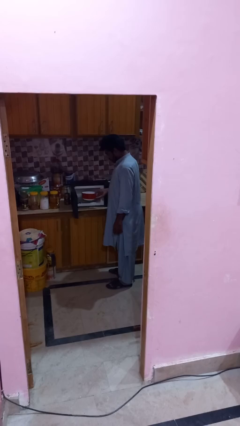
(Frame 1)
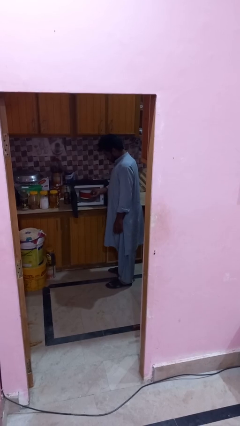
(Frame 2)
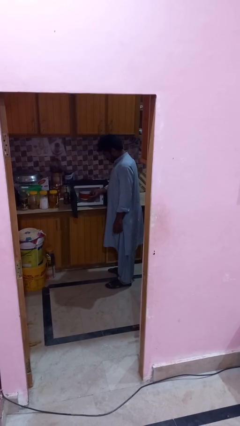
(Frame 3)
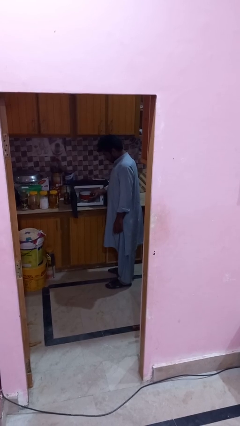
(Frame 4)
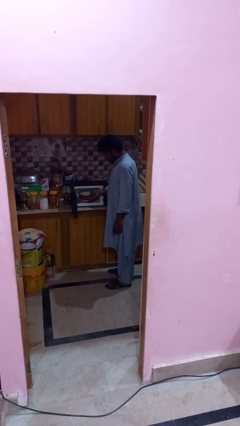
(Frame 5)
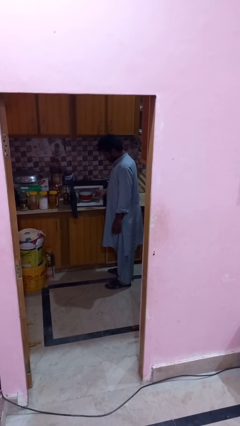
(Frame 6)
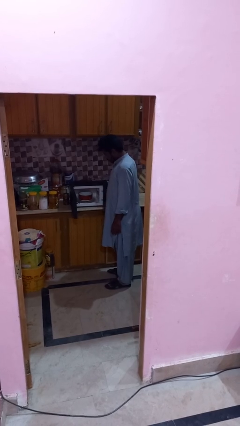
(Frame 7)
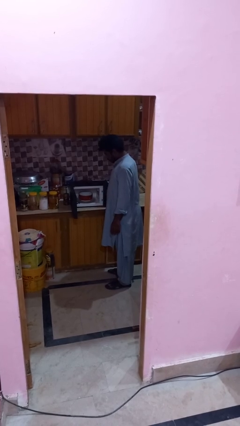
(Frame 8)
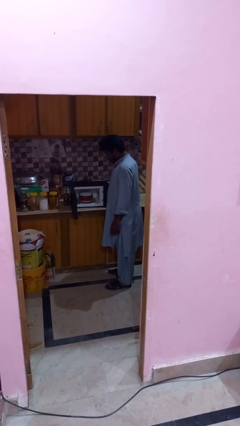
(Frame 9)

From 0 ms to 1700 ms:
person puts object into microwave

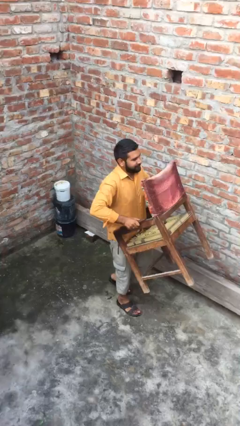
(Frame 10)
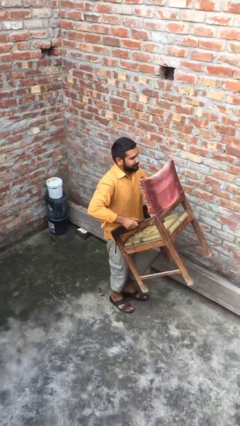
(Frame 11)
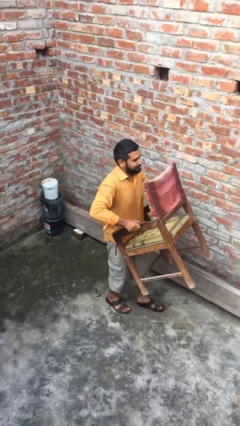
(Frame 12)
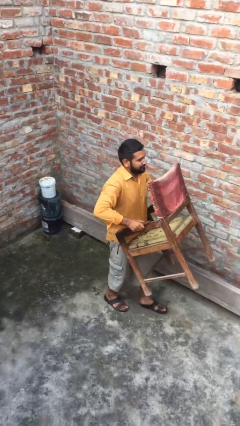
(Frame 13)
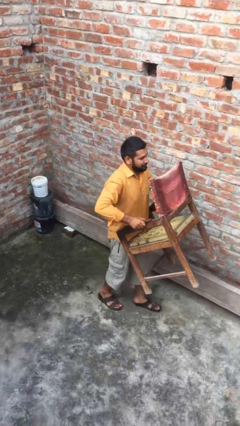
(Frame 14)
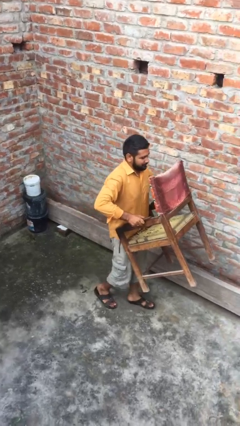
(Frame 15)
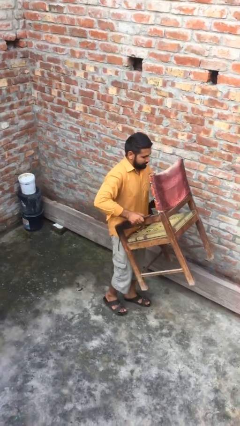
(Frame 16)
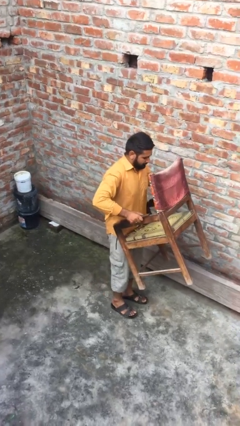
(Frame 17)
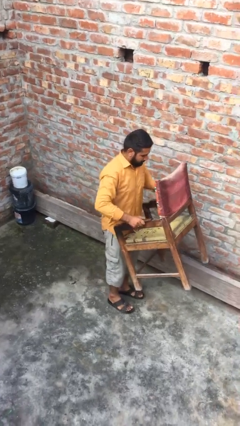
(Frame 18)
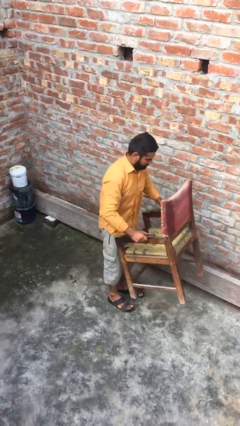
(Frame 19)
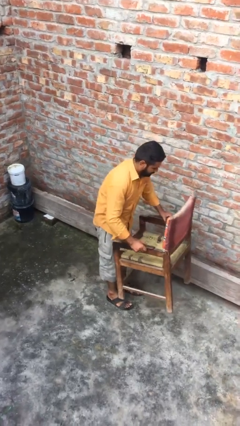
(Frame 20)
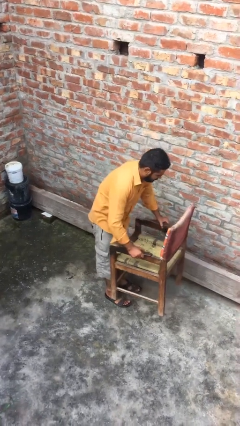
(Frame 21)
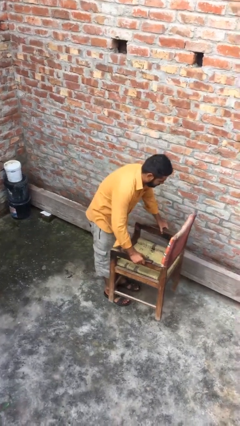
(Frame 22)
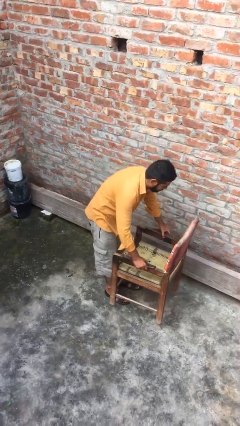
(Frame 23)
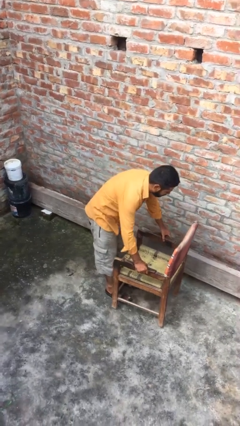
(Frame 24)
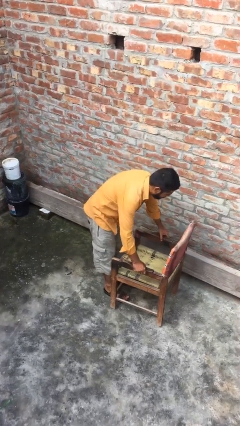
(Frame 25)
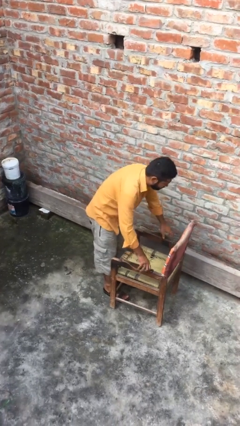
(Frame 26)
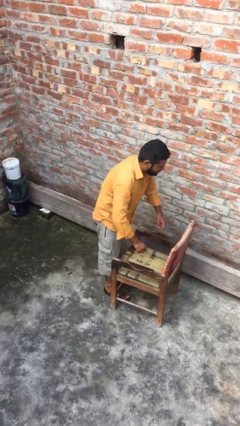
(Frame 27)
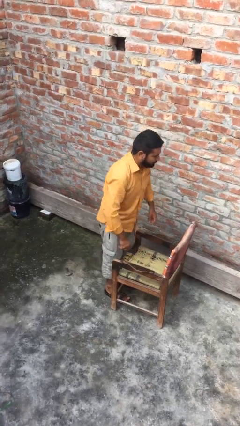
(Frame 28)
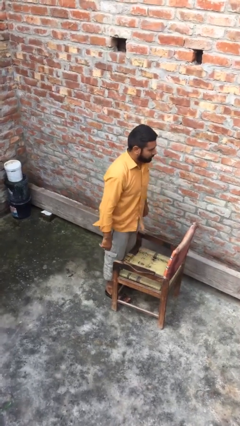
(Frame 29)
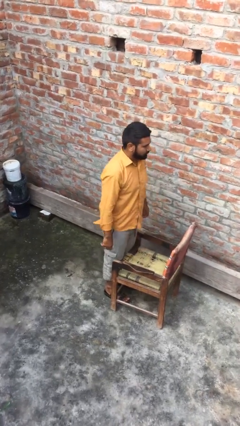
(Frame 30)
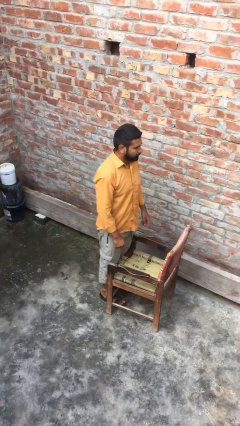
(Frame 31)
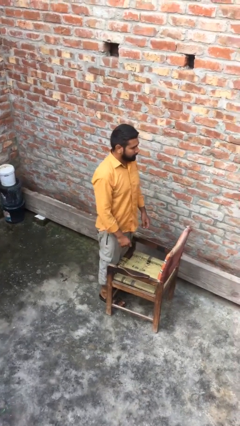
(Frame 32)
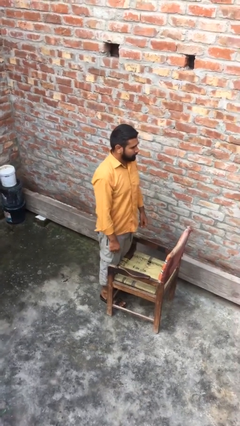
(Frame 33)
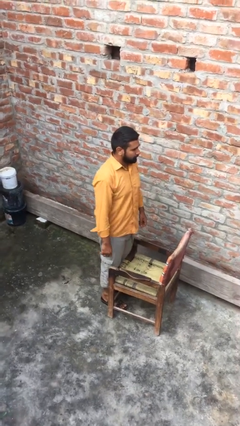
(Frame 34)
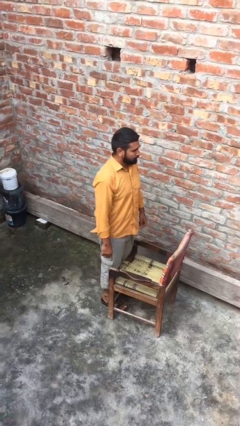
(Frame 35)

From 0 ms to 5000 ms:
person puts down object on floor

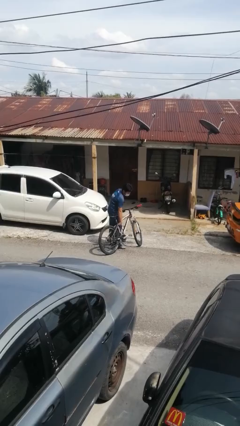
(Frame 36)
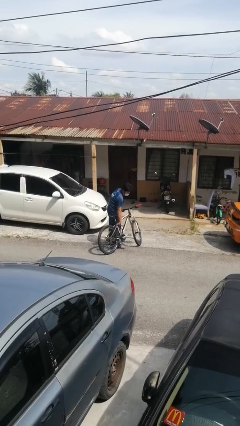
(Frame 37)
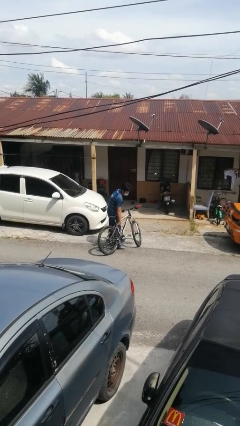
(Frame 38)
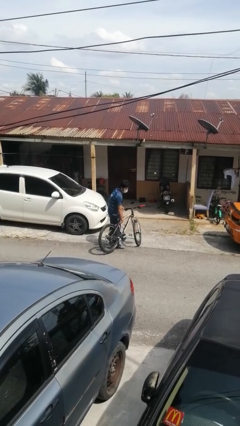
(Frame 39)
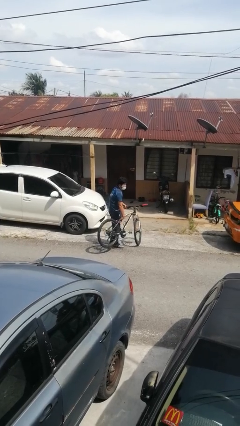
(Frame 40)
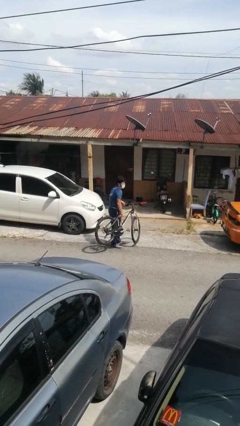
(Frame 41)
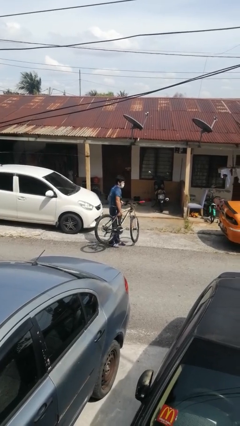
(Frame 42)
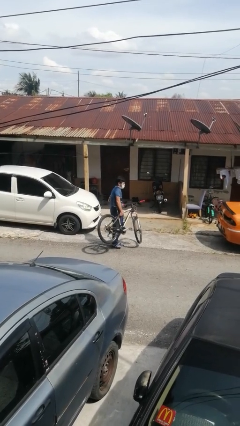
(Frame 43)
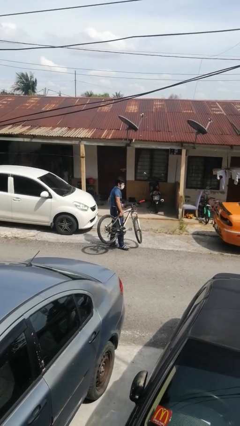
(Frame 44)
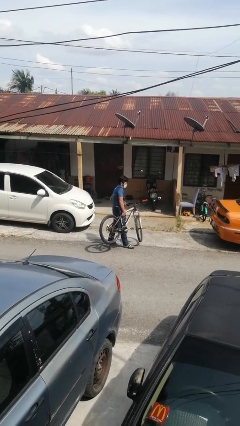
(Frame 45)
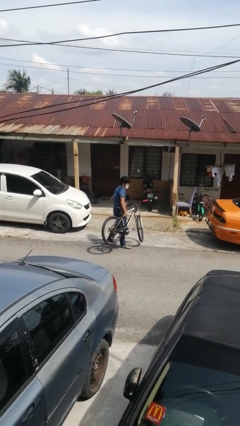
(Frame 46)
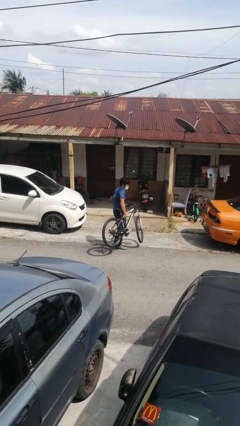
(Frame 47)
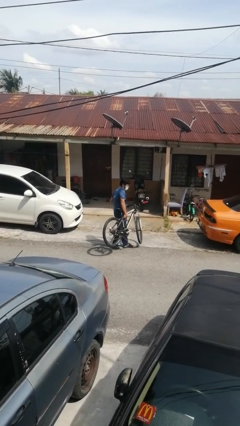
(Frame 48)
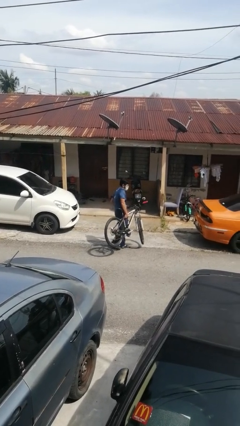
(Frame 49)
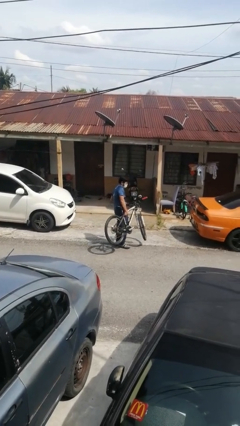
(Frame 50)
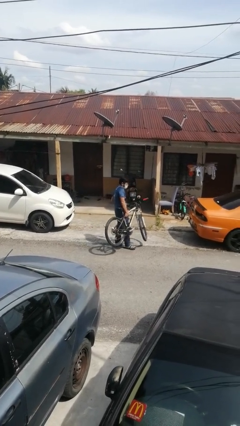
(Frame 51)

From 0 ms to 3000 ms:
person carries bicycle

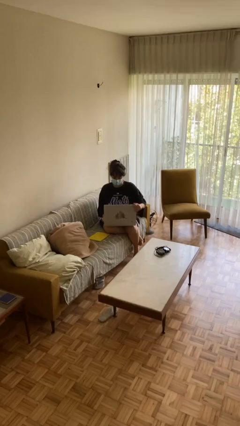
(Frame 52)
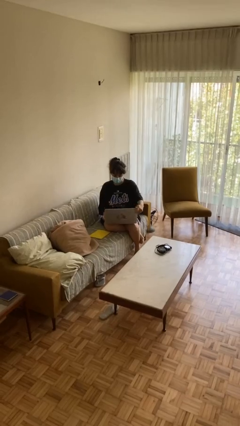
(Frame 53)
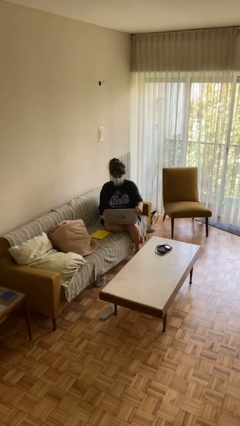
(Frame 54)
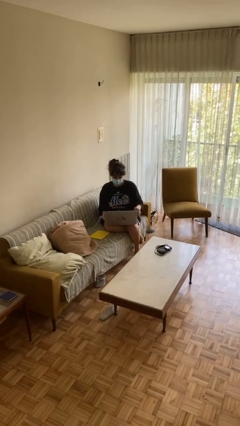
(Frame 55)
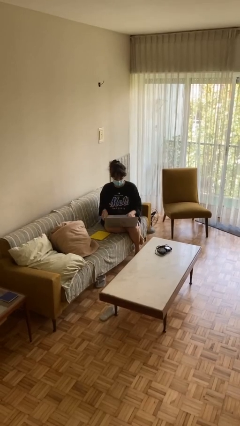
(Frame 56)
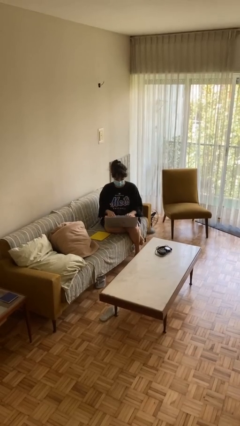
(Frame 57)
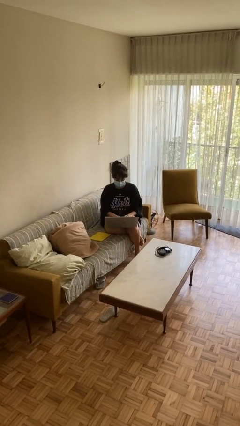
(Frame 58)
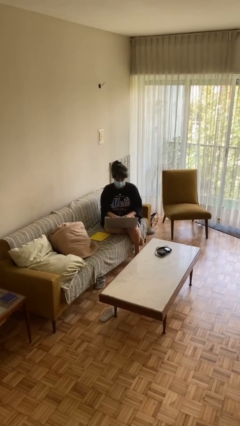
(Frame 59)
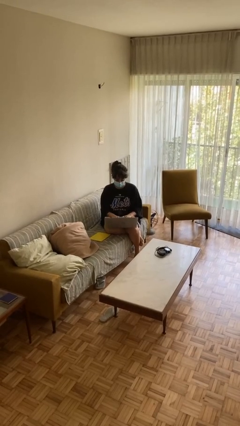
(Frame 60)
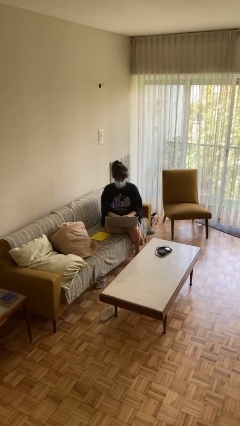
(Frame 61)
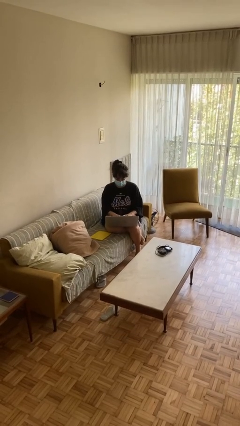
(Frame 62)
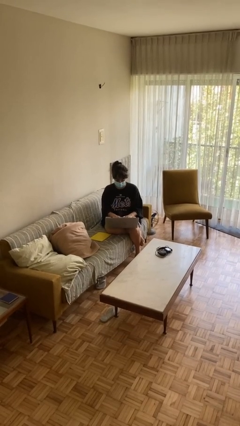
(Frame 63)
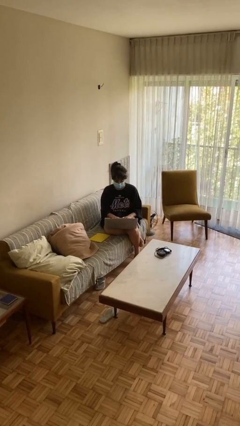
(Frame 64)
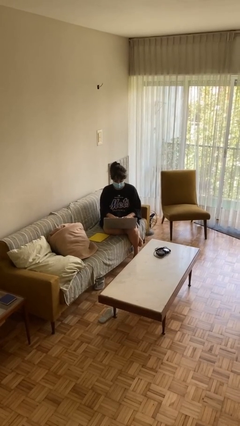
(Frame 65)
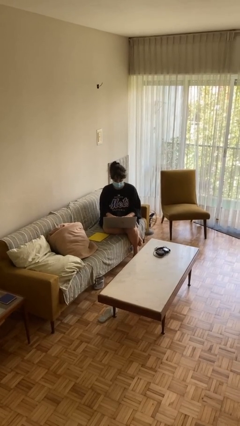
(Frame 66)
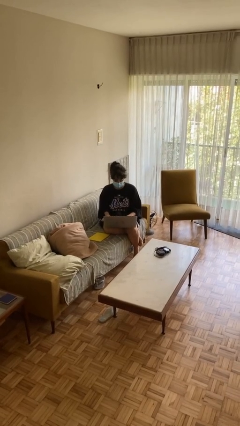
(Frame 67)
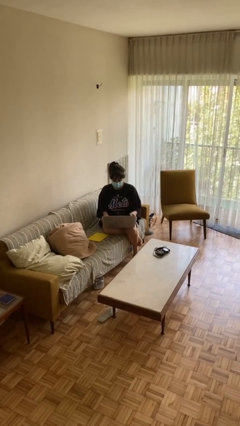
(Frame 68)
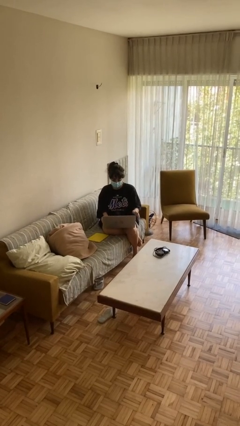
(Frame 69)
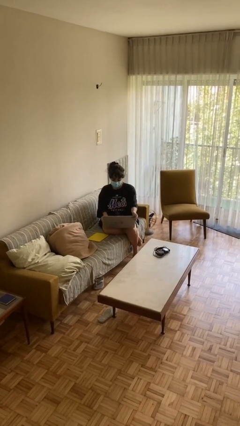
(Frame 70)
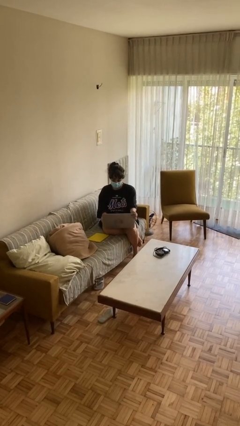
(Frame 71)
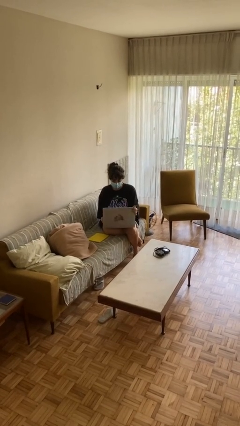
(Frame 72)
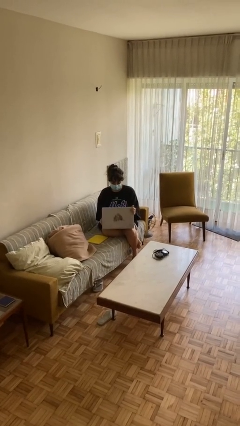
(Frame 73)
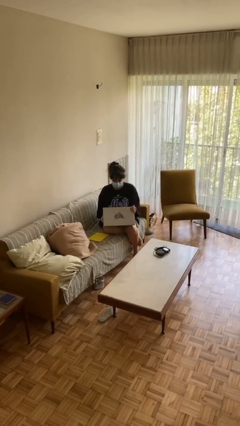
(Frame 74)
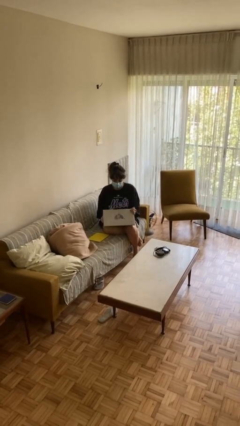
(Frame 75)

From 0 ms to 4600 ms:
person interacts with laptop

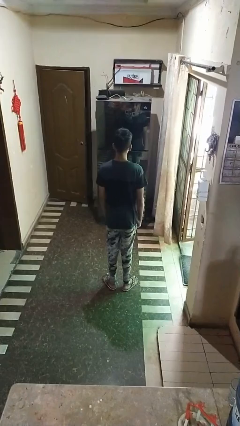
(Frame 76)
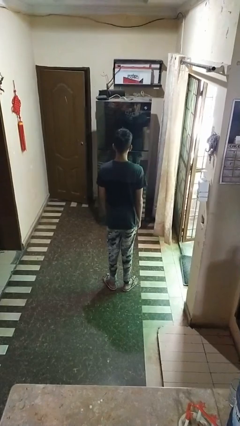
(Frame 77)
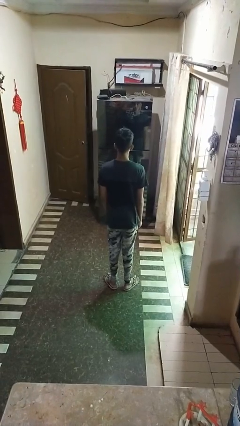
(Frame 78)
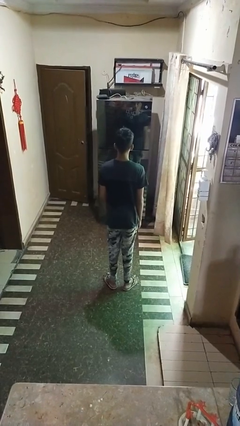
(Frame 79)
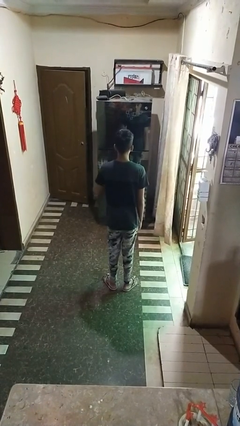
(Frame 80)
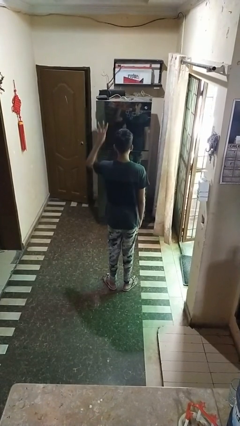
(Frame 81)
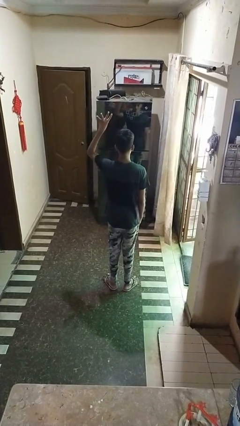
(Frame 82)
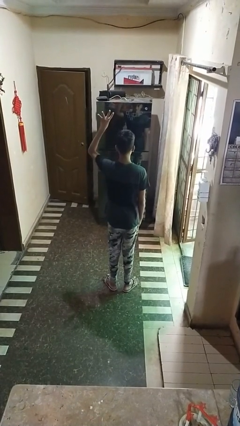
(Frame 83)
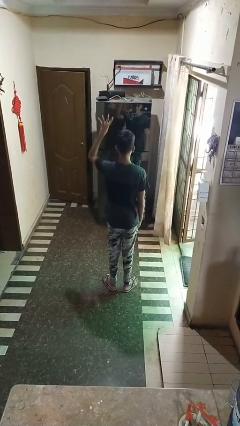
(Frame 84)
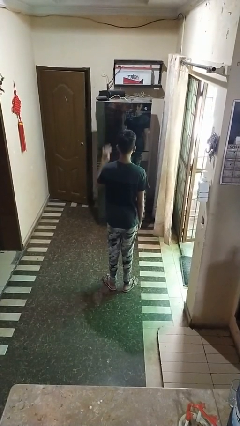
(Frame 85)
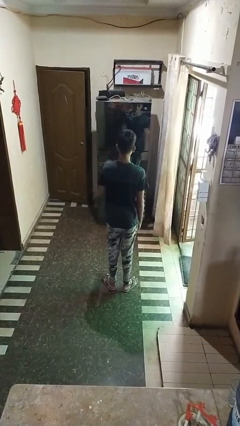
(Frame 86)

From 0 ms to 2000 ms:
person gestures number four
